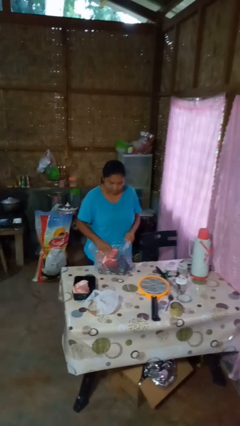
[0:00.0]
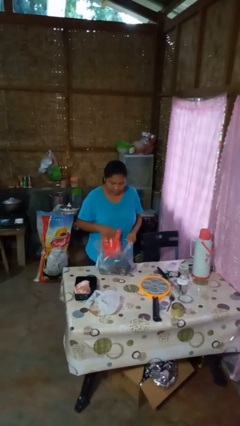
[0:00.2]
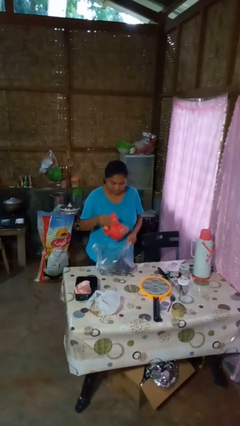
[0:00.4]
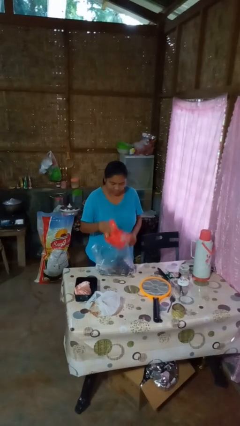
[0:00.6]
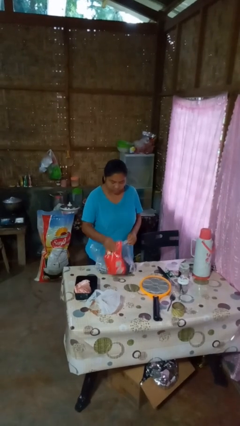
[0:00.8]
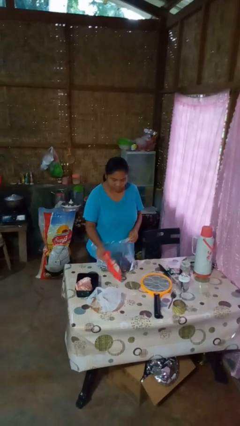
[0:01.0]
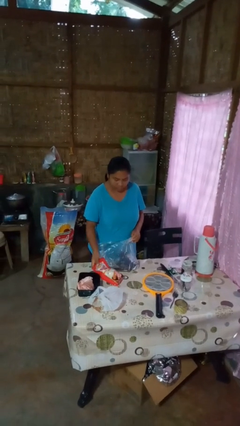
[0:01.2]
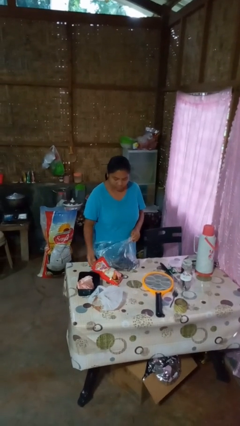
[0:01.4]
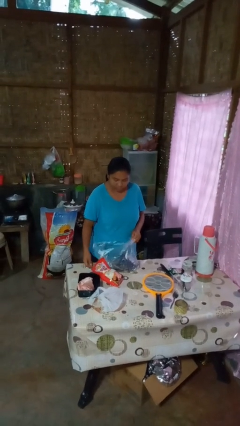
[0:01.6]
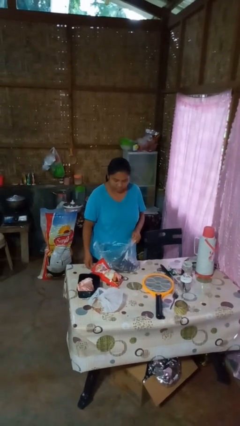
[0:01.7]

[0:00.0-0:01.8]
person takes object from bag

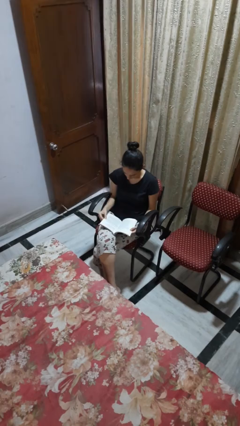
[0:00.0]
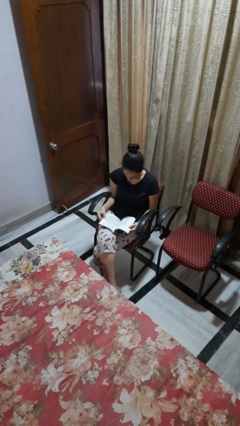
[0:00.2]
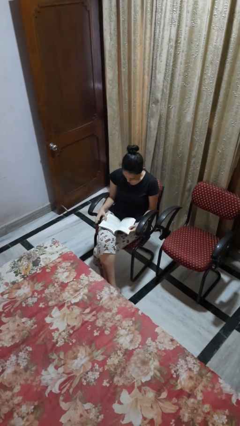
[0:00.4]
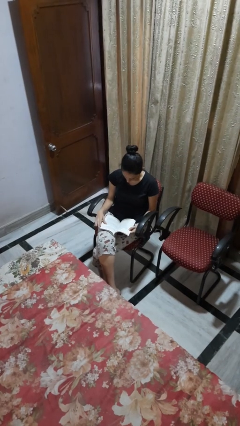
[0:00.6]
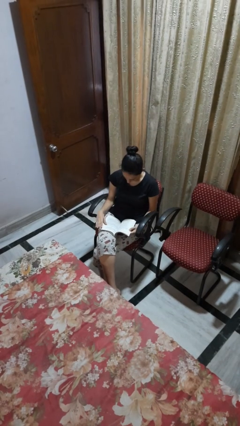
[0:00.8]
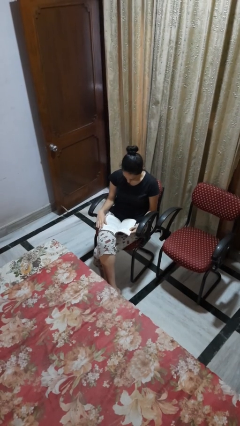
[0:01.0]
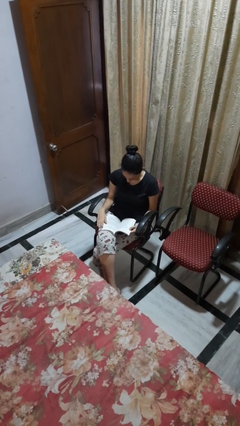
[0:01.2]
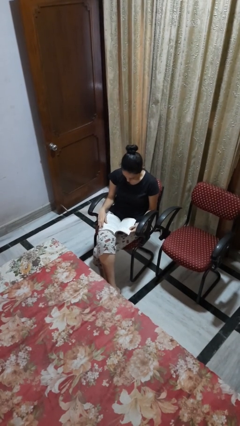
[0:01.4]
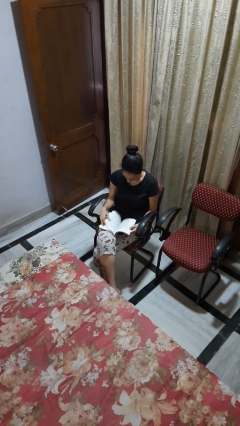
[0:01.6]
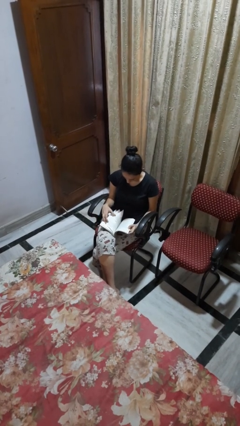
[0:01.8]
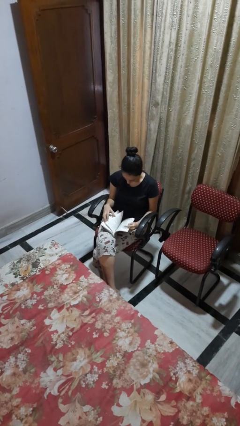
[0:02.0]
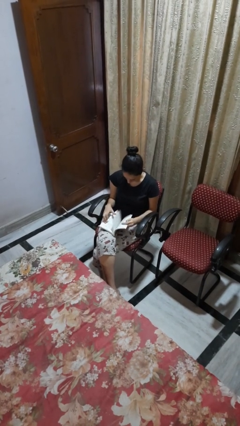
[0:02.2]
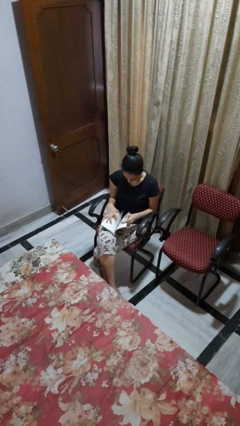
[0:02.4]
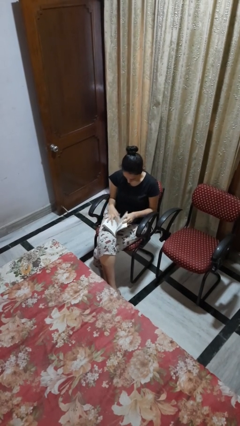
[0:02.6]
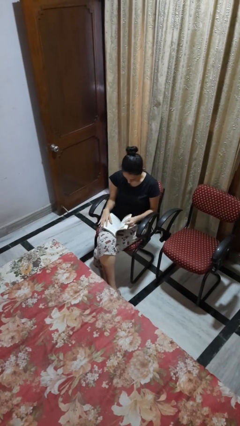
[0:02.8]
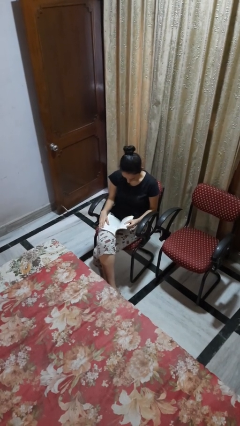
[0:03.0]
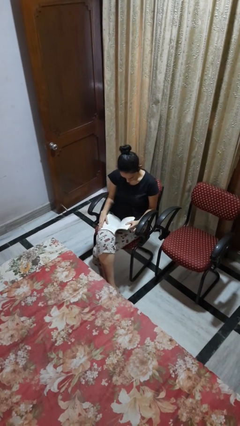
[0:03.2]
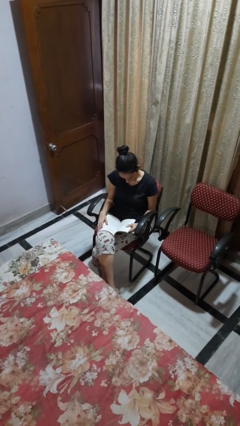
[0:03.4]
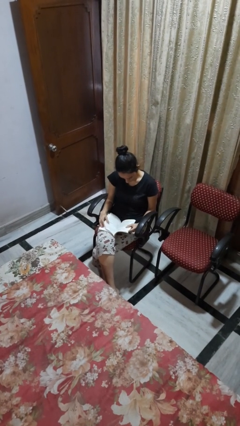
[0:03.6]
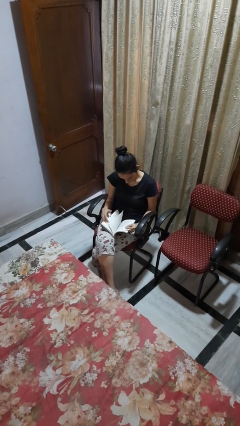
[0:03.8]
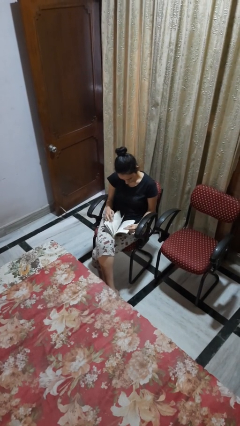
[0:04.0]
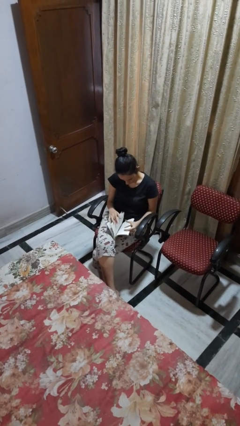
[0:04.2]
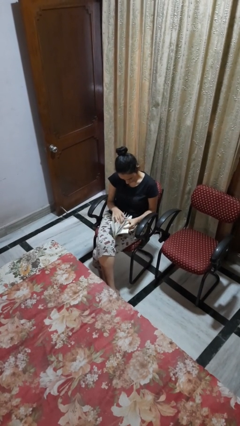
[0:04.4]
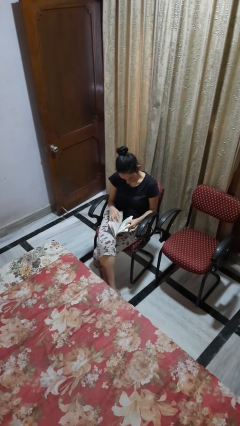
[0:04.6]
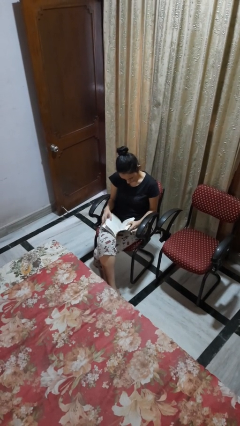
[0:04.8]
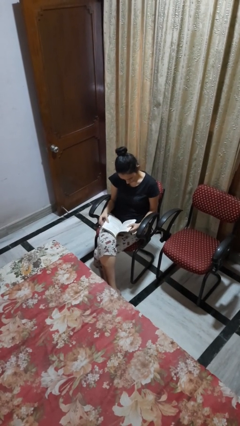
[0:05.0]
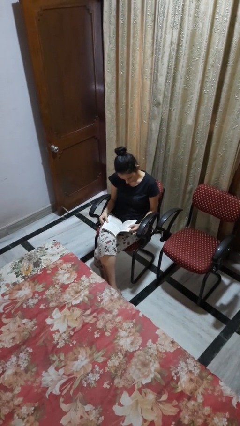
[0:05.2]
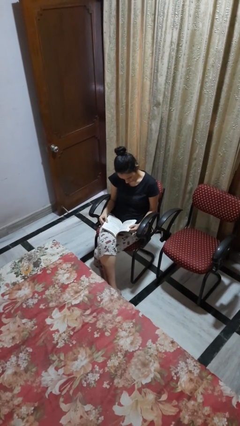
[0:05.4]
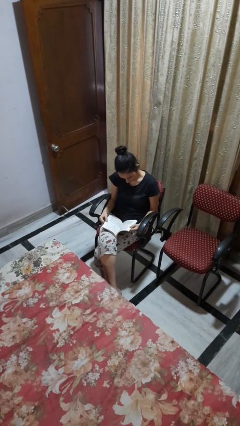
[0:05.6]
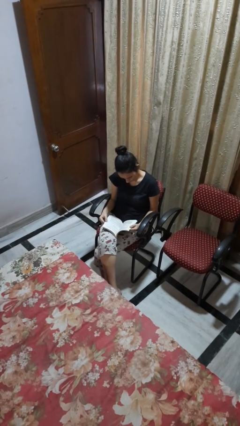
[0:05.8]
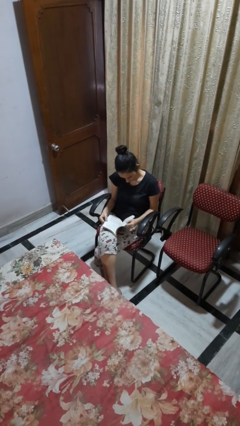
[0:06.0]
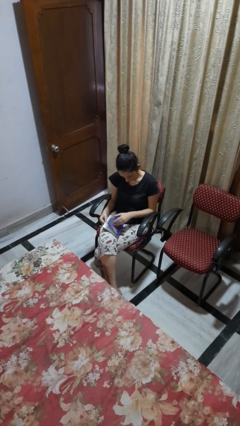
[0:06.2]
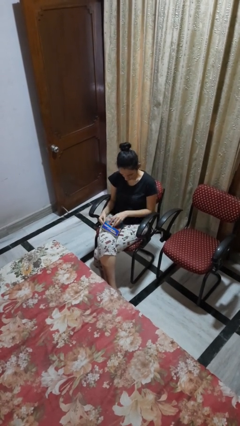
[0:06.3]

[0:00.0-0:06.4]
person reads book

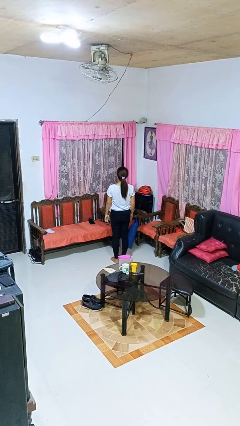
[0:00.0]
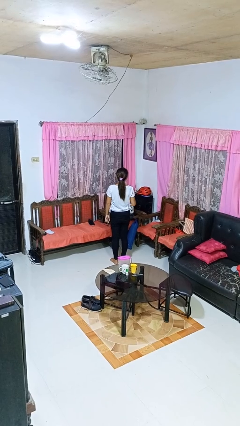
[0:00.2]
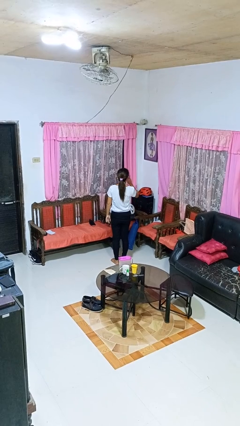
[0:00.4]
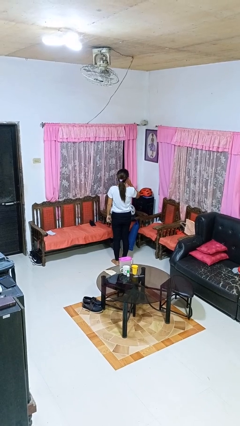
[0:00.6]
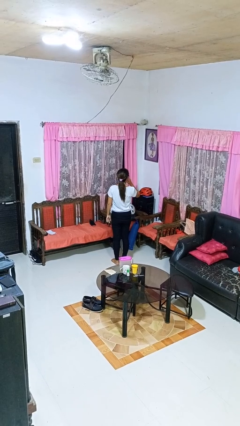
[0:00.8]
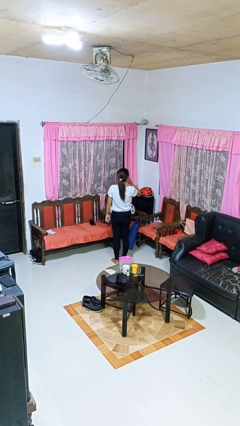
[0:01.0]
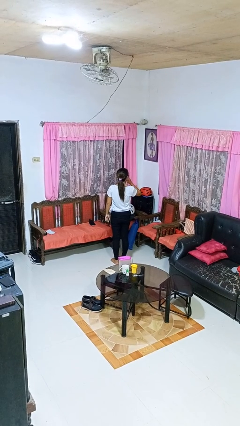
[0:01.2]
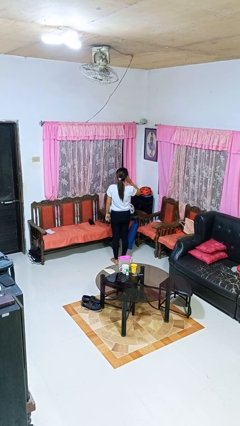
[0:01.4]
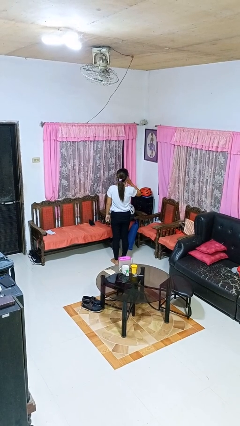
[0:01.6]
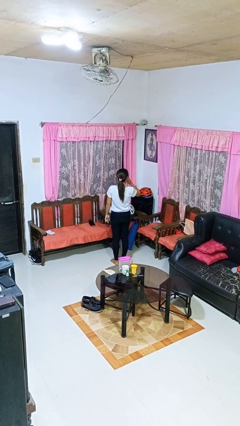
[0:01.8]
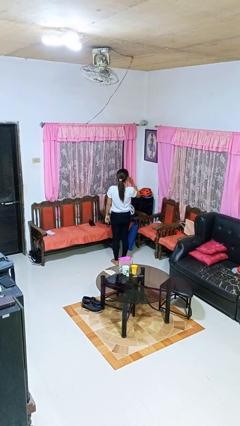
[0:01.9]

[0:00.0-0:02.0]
person gestures be quiet

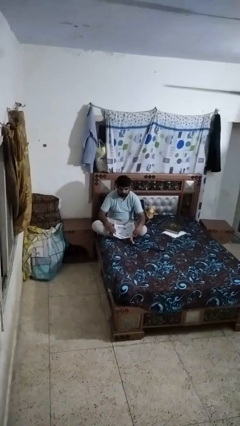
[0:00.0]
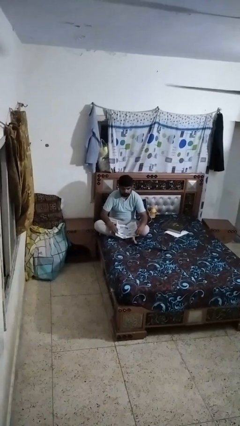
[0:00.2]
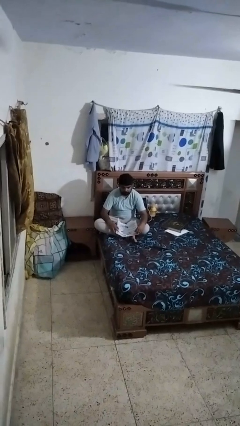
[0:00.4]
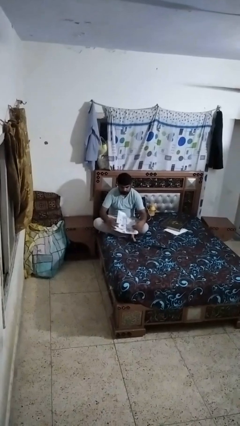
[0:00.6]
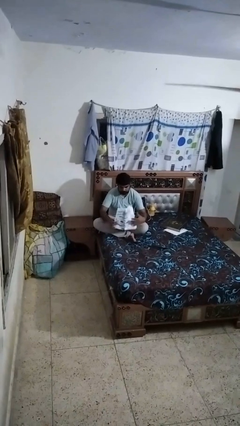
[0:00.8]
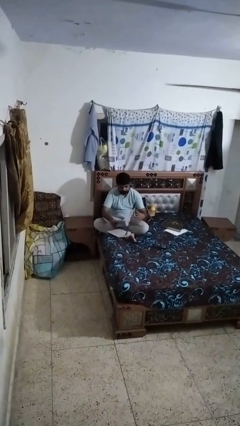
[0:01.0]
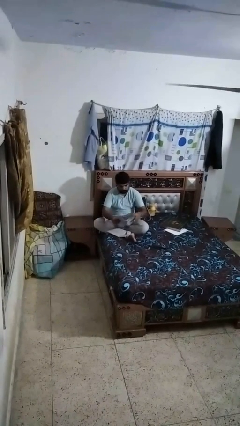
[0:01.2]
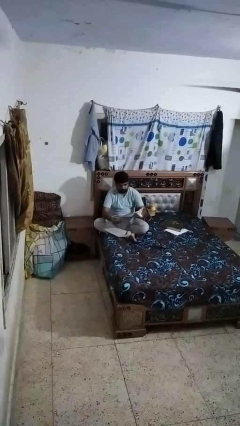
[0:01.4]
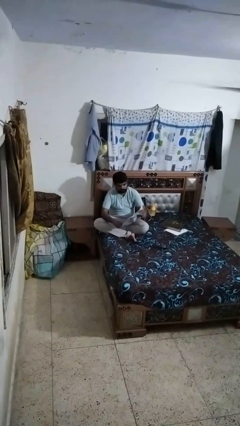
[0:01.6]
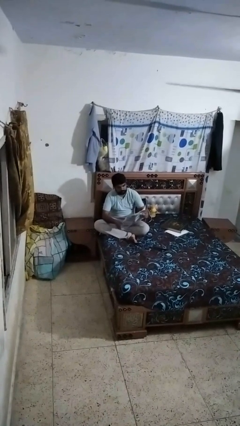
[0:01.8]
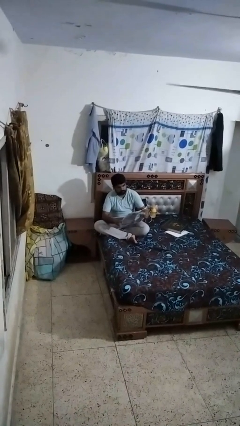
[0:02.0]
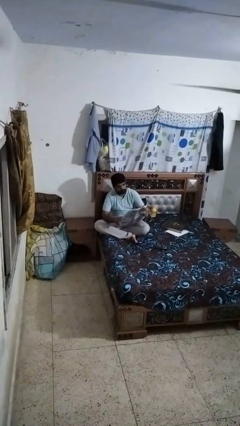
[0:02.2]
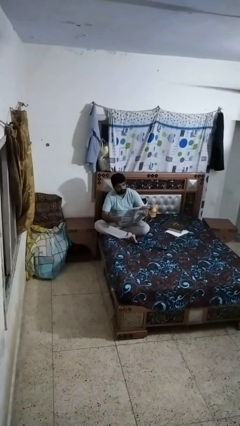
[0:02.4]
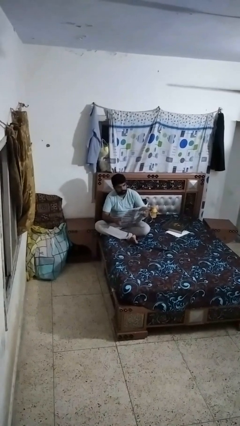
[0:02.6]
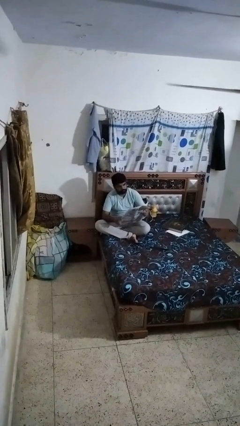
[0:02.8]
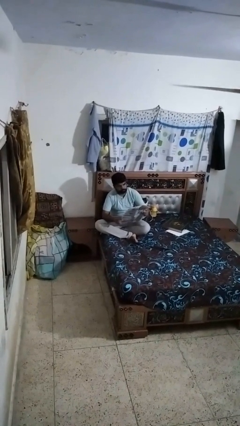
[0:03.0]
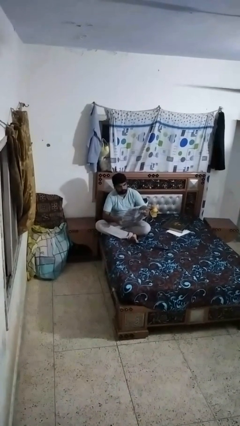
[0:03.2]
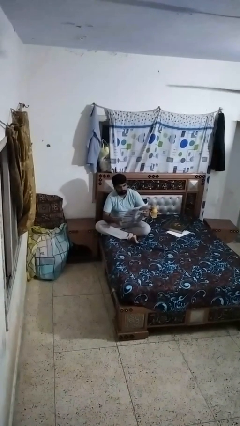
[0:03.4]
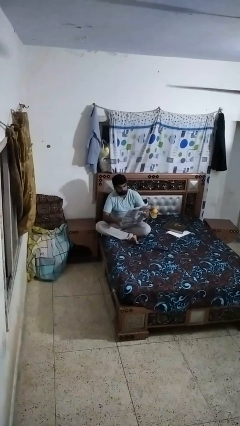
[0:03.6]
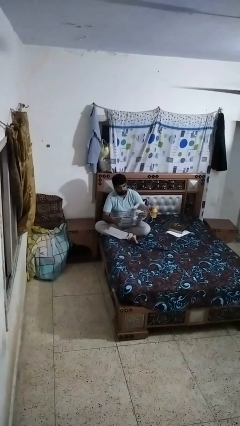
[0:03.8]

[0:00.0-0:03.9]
person reads newspaper

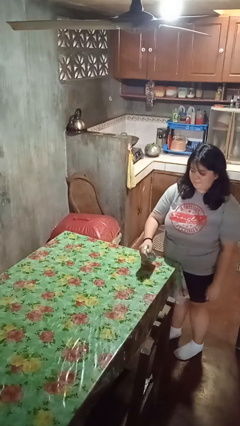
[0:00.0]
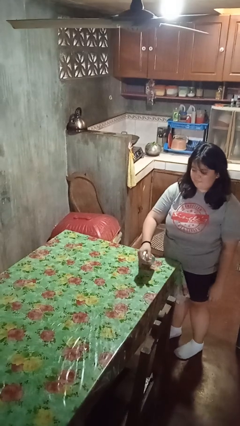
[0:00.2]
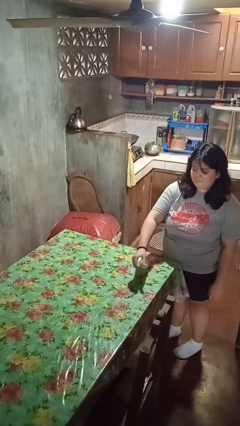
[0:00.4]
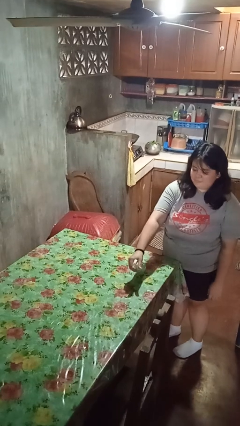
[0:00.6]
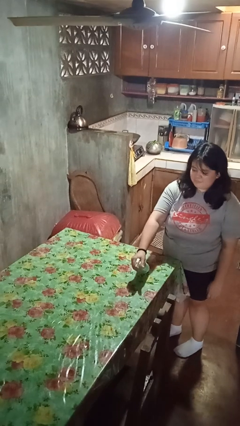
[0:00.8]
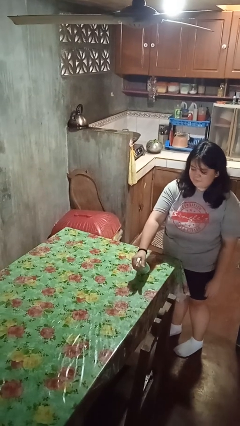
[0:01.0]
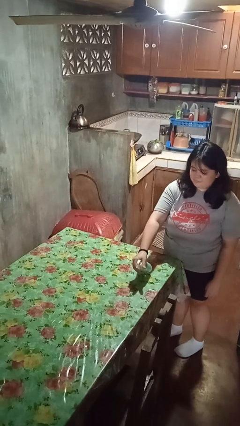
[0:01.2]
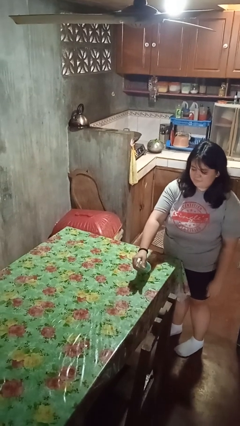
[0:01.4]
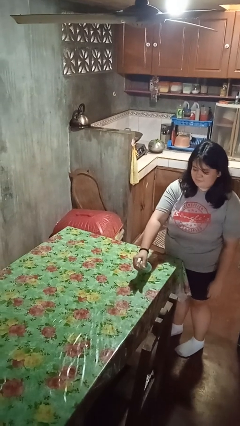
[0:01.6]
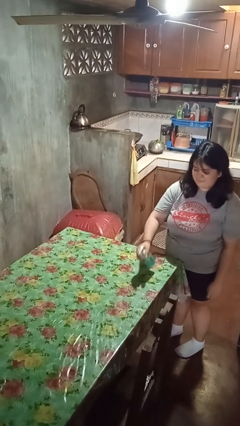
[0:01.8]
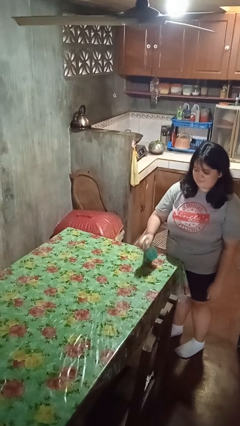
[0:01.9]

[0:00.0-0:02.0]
person sprays from bottle

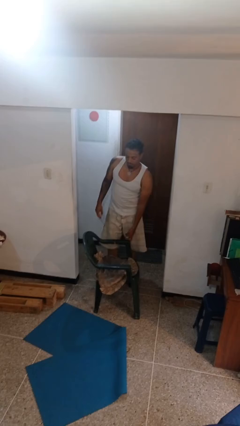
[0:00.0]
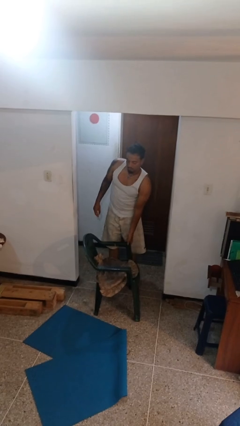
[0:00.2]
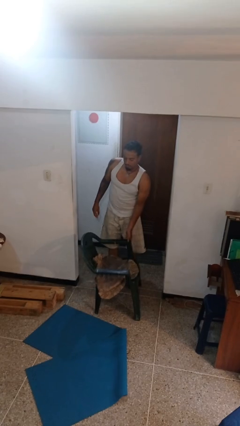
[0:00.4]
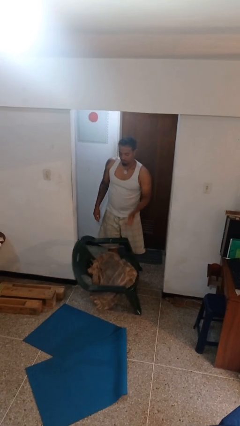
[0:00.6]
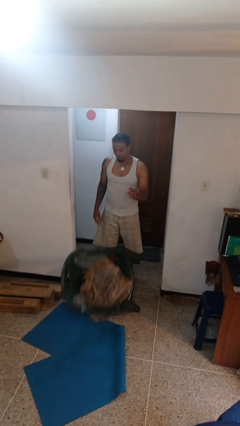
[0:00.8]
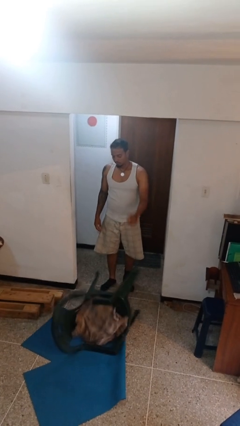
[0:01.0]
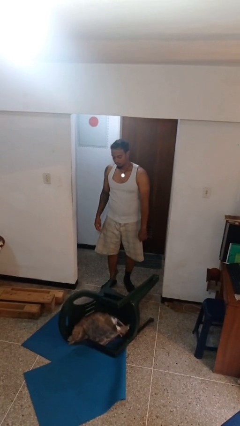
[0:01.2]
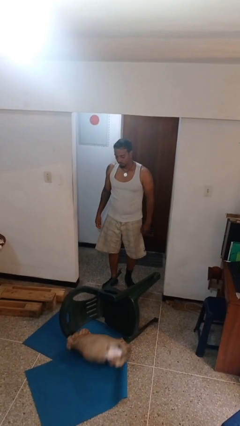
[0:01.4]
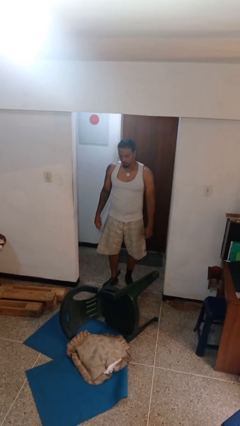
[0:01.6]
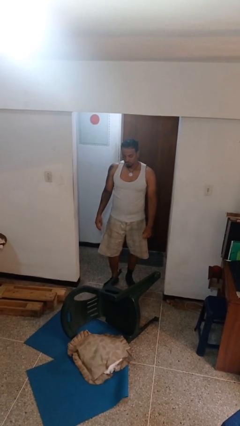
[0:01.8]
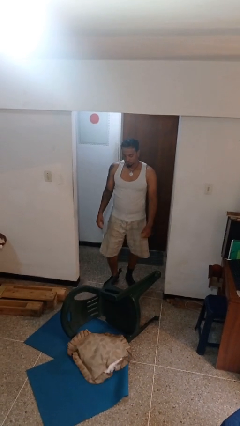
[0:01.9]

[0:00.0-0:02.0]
person knocks over furniture
